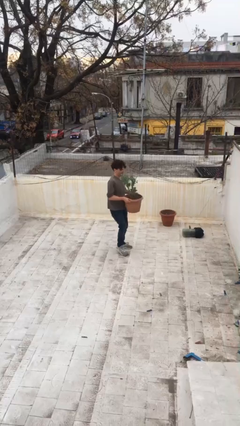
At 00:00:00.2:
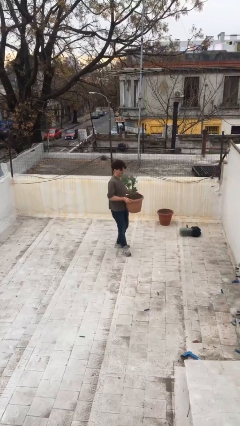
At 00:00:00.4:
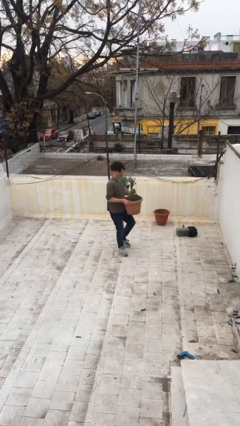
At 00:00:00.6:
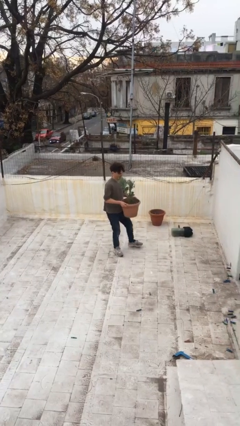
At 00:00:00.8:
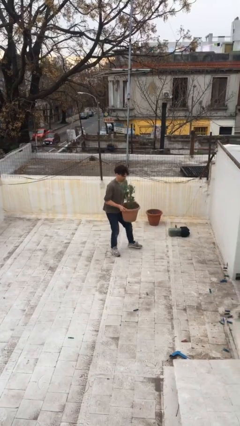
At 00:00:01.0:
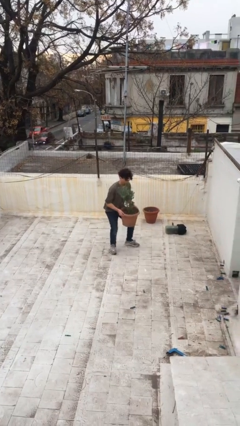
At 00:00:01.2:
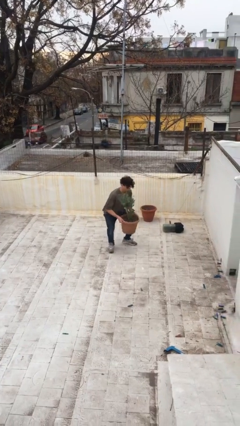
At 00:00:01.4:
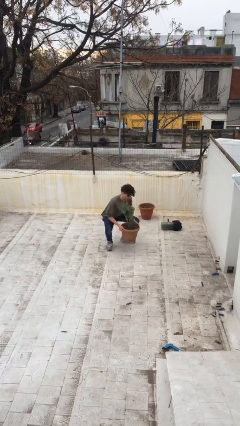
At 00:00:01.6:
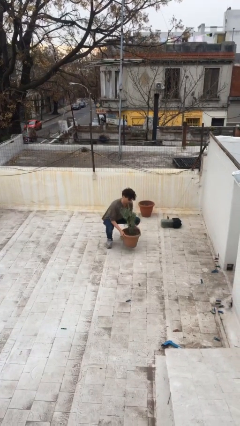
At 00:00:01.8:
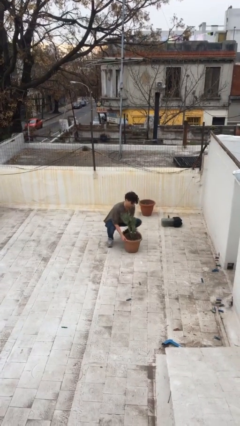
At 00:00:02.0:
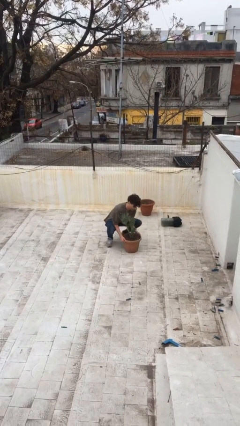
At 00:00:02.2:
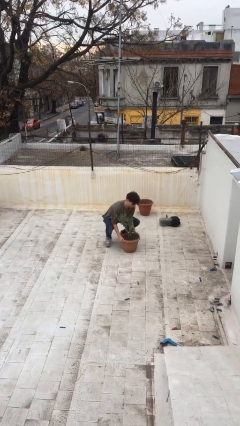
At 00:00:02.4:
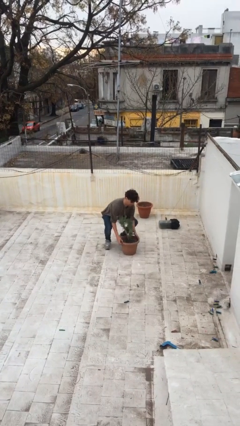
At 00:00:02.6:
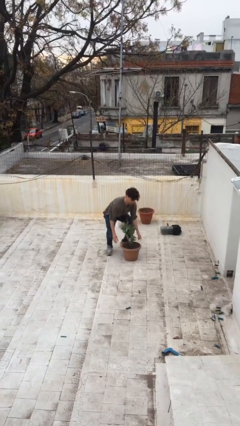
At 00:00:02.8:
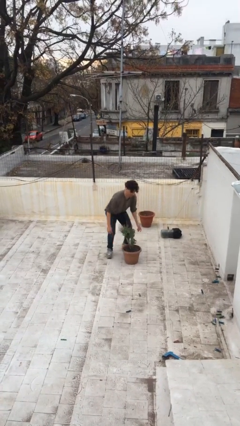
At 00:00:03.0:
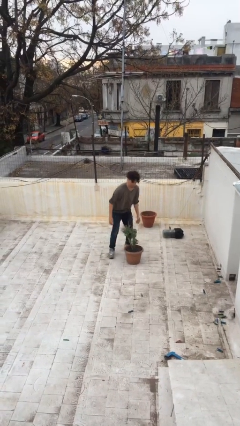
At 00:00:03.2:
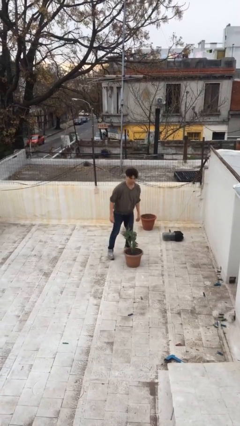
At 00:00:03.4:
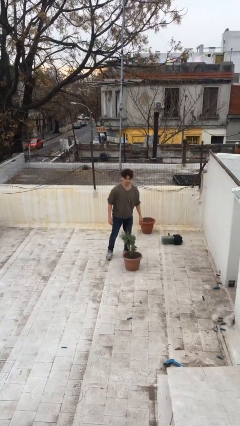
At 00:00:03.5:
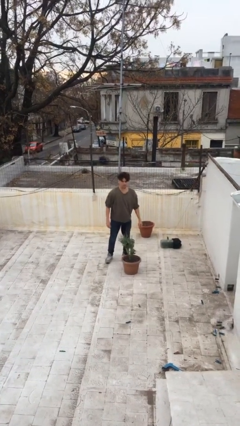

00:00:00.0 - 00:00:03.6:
person puts down object on floor

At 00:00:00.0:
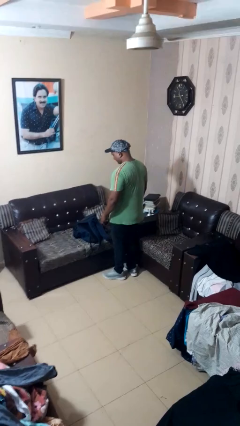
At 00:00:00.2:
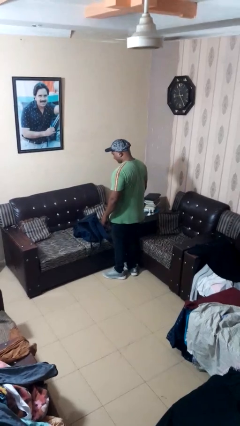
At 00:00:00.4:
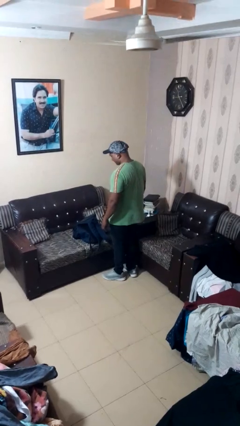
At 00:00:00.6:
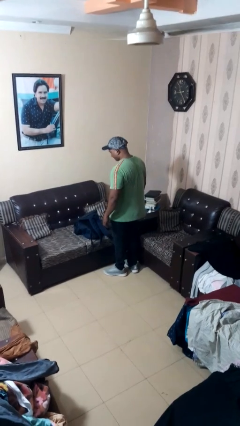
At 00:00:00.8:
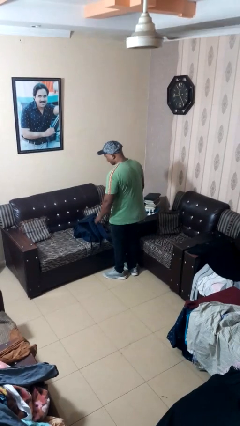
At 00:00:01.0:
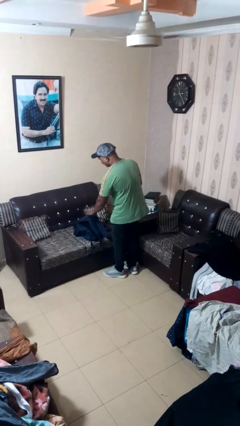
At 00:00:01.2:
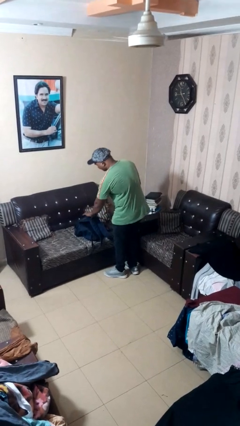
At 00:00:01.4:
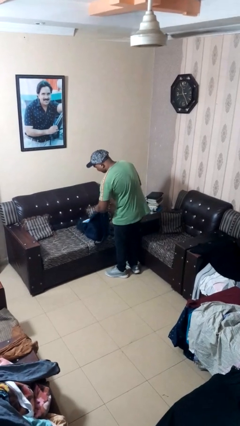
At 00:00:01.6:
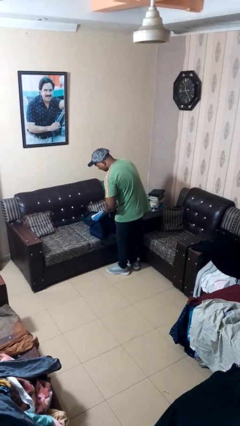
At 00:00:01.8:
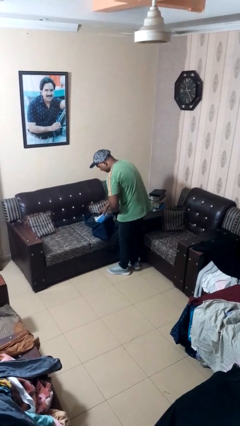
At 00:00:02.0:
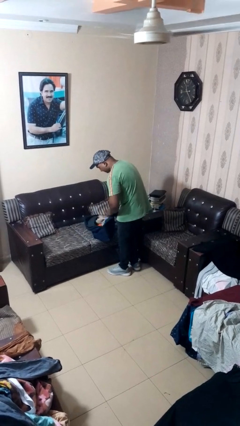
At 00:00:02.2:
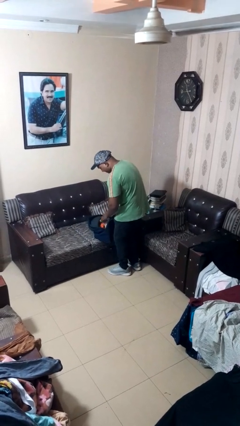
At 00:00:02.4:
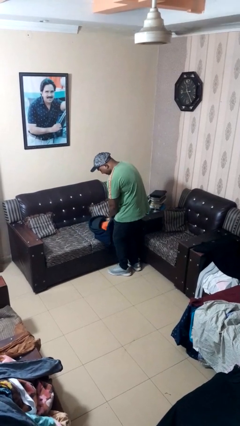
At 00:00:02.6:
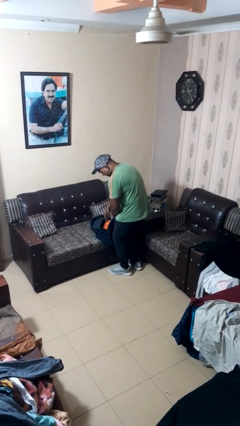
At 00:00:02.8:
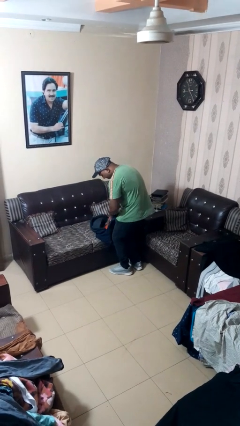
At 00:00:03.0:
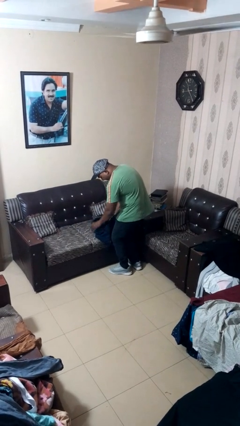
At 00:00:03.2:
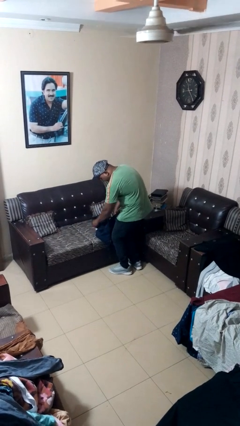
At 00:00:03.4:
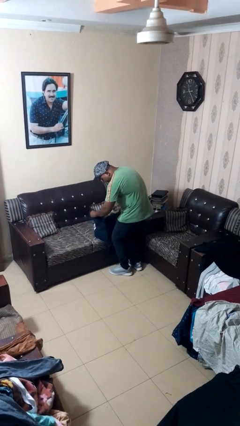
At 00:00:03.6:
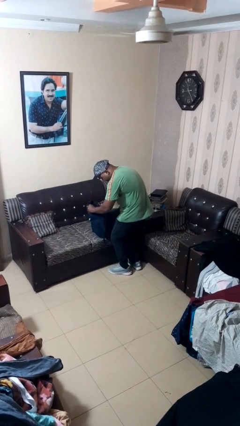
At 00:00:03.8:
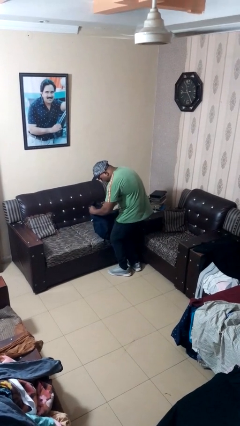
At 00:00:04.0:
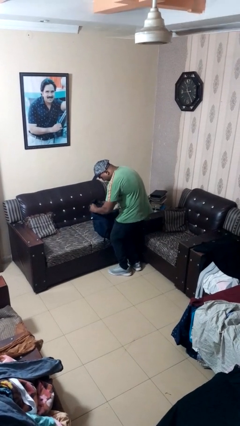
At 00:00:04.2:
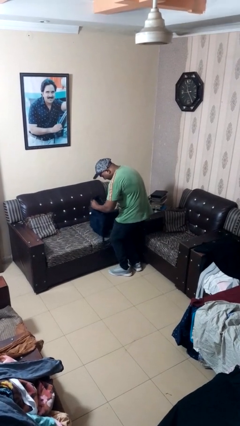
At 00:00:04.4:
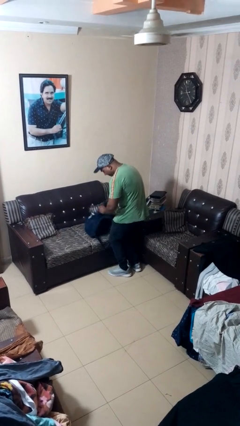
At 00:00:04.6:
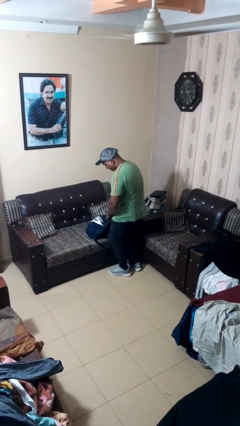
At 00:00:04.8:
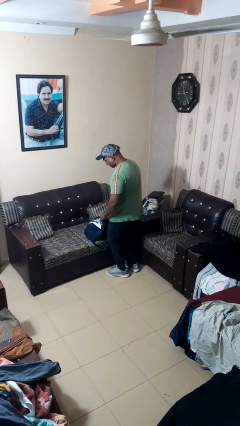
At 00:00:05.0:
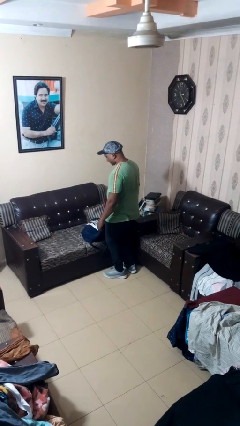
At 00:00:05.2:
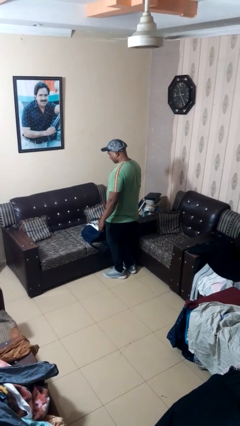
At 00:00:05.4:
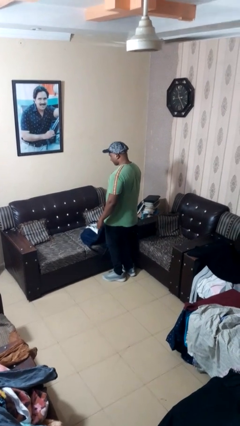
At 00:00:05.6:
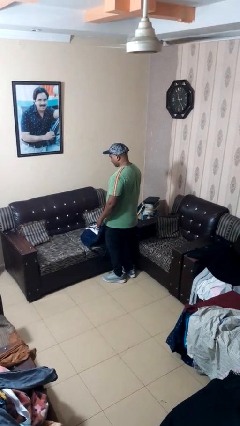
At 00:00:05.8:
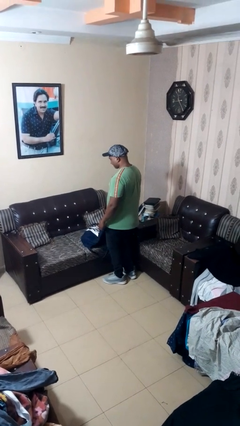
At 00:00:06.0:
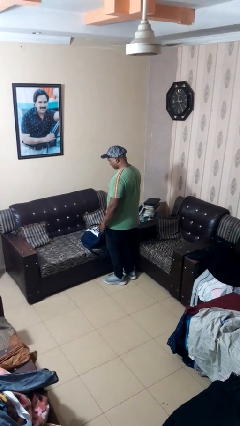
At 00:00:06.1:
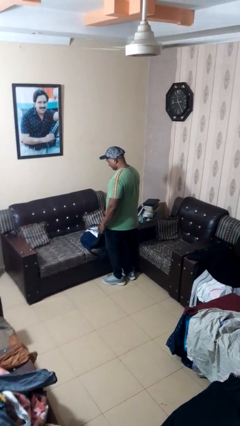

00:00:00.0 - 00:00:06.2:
person searches in bag

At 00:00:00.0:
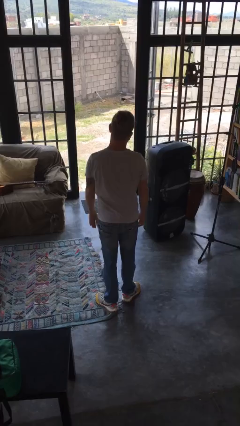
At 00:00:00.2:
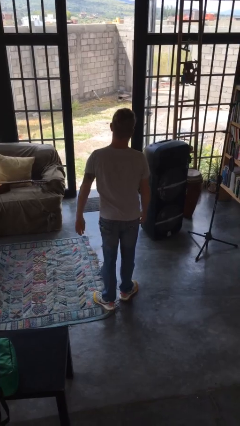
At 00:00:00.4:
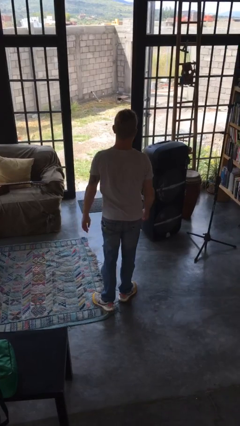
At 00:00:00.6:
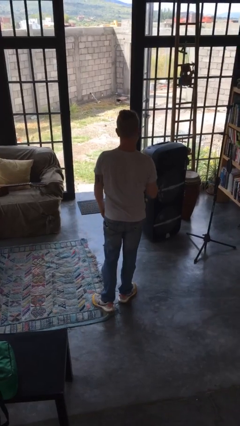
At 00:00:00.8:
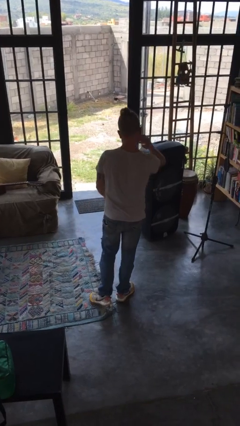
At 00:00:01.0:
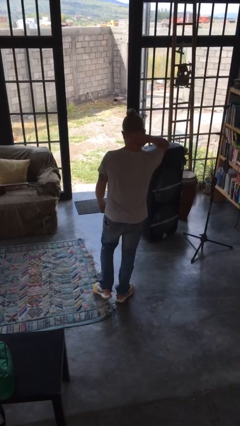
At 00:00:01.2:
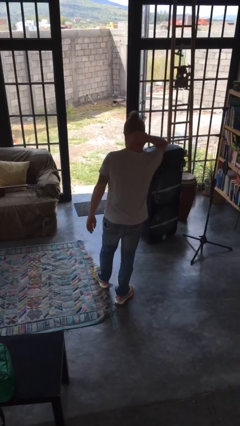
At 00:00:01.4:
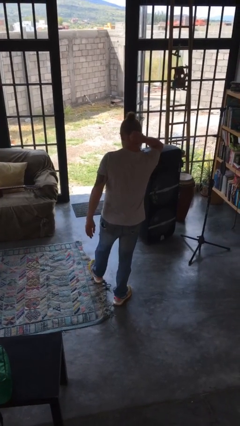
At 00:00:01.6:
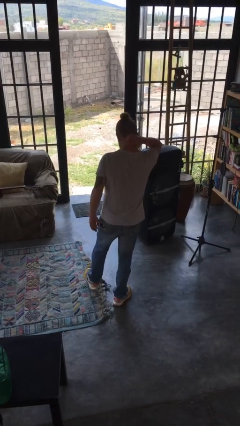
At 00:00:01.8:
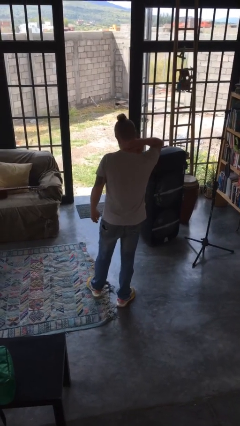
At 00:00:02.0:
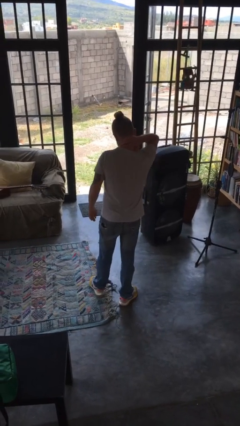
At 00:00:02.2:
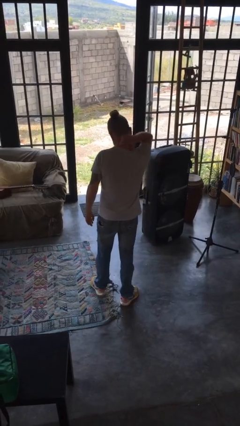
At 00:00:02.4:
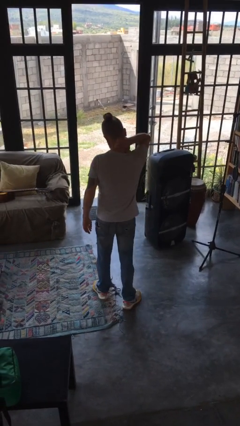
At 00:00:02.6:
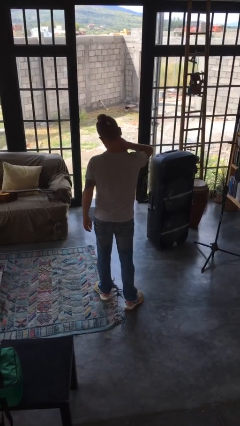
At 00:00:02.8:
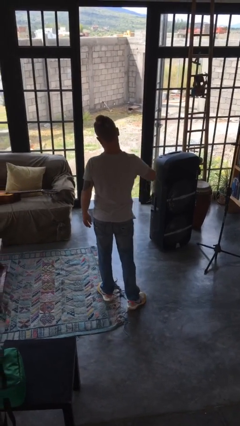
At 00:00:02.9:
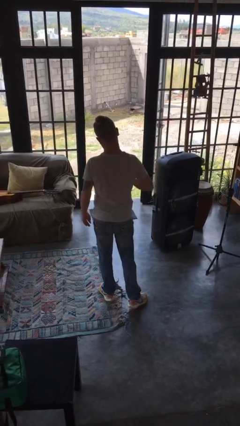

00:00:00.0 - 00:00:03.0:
person rubs neck

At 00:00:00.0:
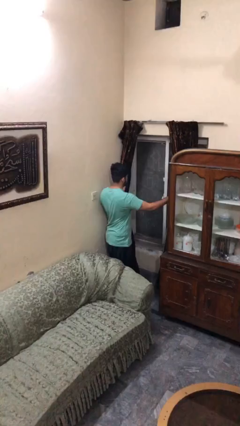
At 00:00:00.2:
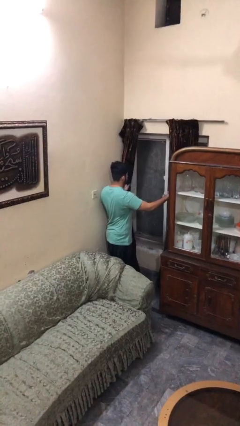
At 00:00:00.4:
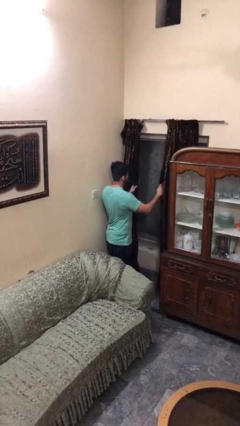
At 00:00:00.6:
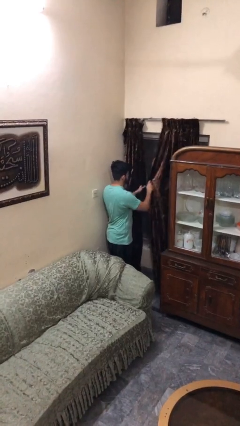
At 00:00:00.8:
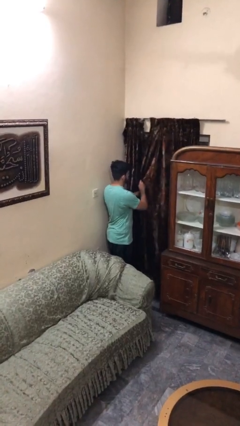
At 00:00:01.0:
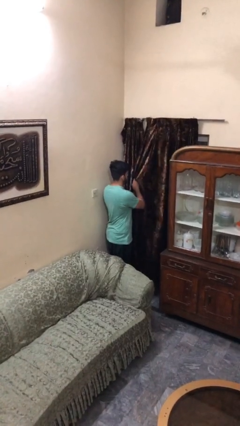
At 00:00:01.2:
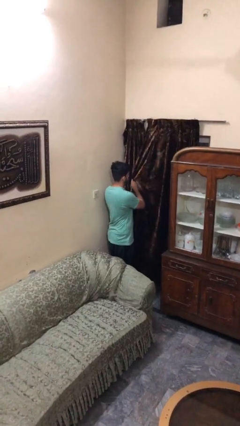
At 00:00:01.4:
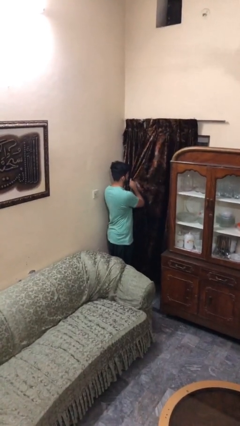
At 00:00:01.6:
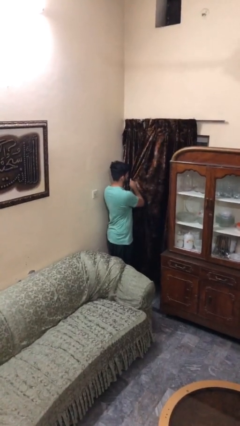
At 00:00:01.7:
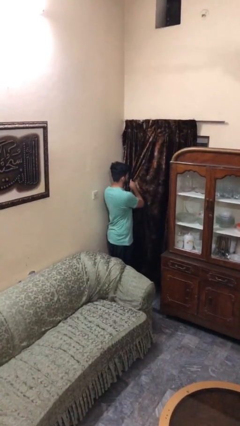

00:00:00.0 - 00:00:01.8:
person closes curtains

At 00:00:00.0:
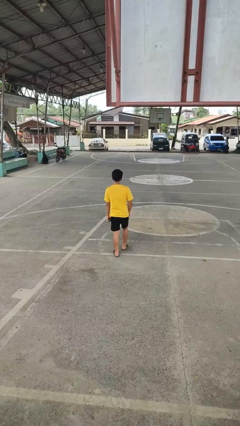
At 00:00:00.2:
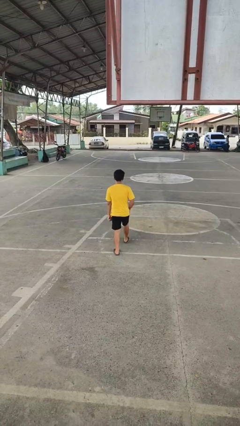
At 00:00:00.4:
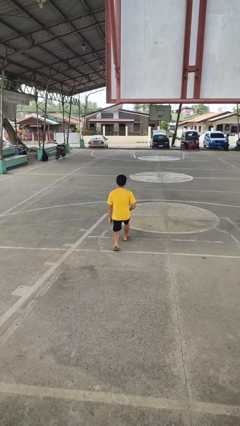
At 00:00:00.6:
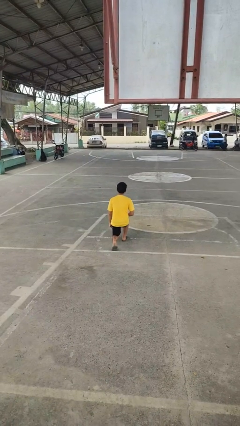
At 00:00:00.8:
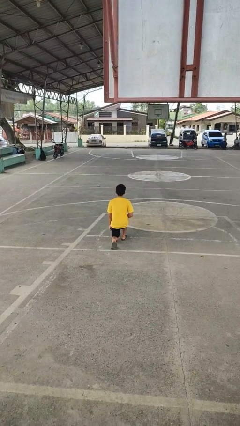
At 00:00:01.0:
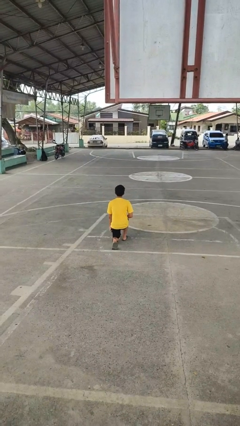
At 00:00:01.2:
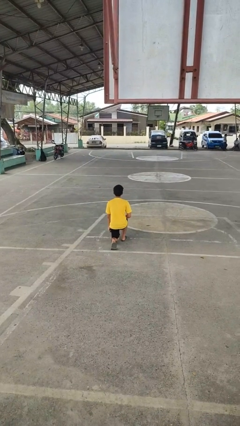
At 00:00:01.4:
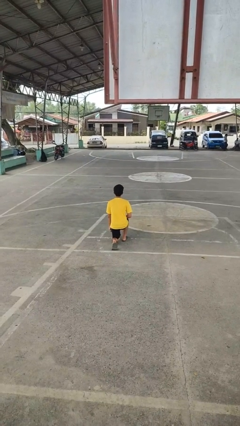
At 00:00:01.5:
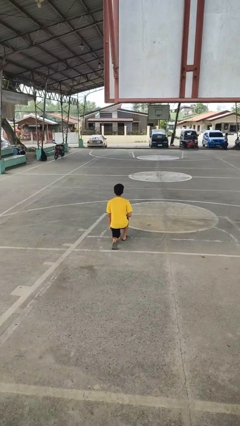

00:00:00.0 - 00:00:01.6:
person kneels

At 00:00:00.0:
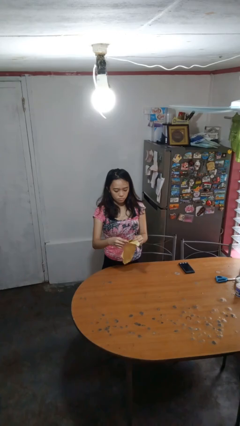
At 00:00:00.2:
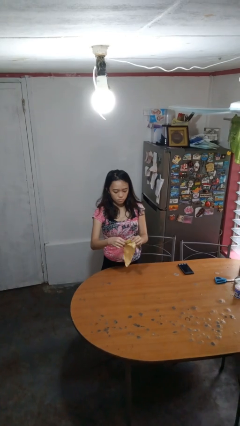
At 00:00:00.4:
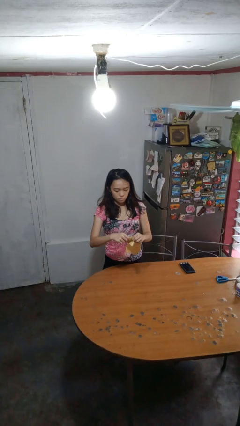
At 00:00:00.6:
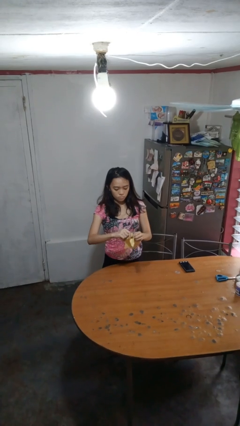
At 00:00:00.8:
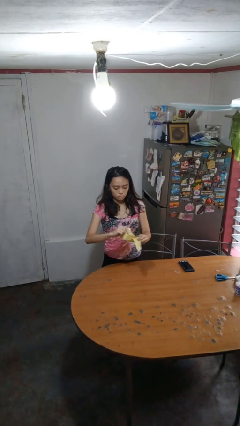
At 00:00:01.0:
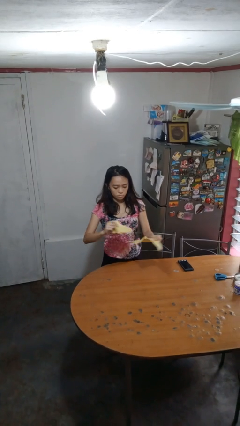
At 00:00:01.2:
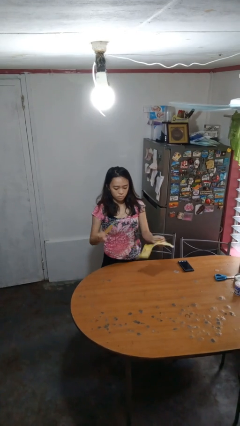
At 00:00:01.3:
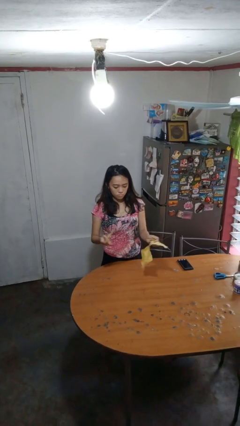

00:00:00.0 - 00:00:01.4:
person tears paper
